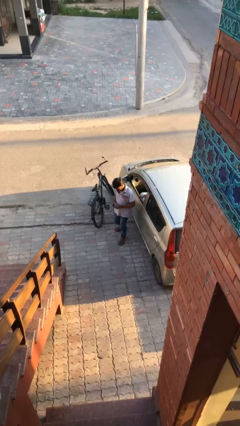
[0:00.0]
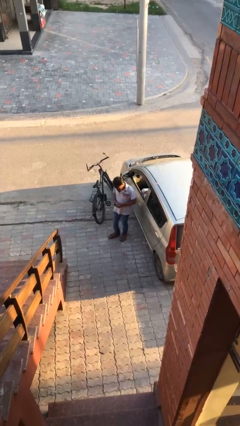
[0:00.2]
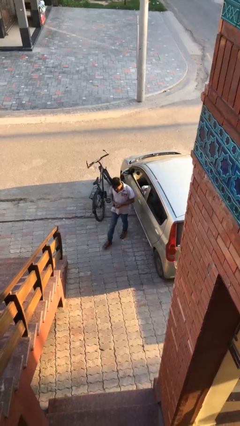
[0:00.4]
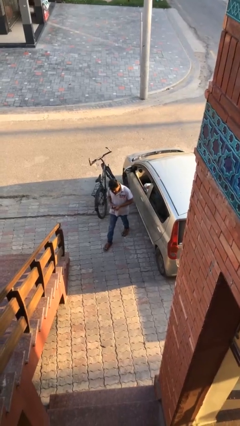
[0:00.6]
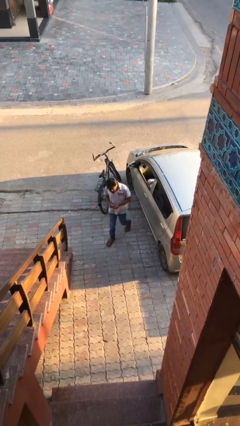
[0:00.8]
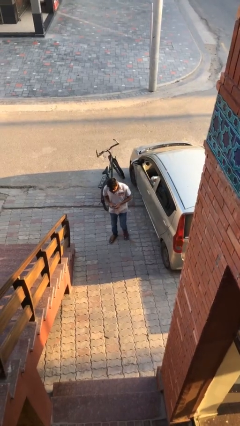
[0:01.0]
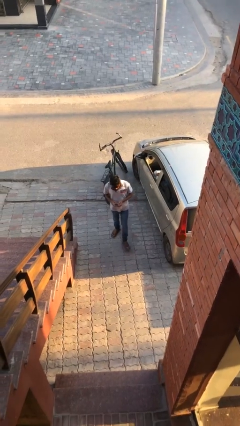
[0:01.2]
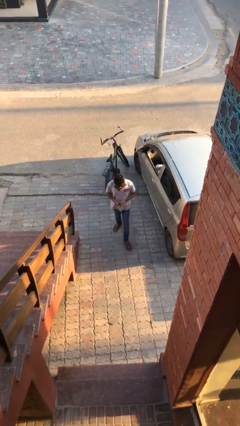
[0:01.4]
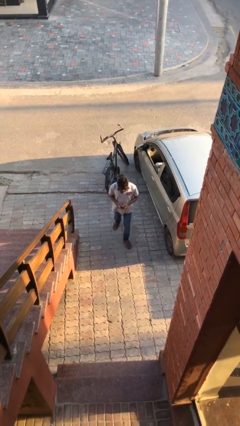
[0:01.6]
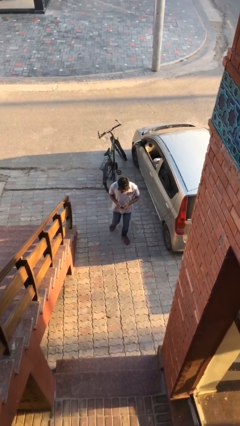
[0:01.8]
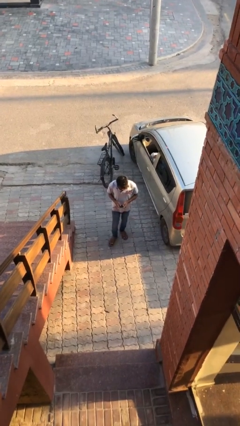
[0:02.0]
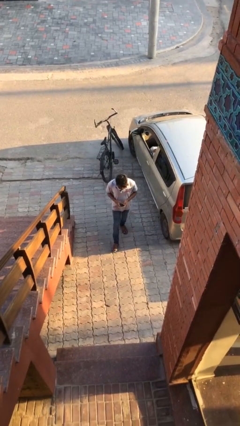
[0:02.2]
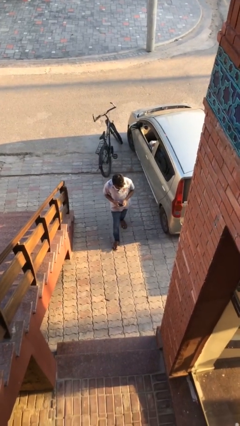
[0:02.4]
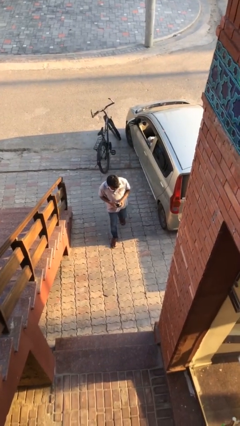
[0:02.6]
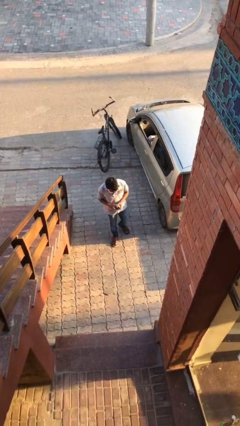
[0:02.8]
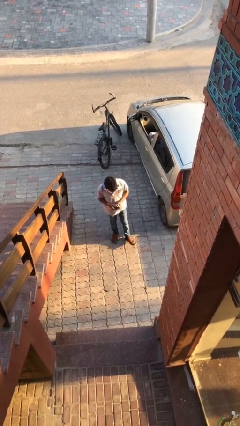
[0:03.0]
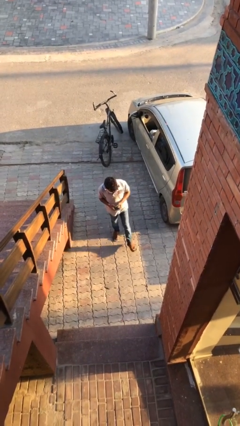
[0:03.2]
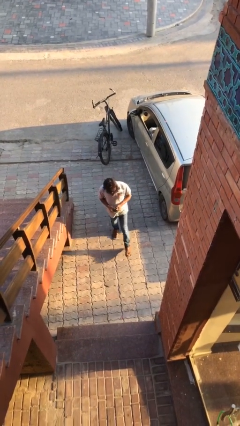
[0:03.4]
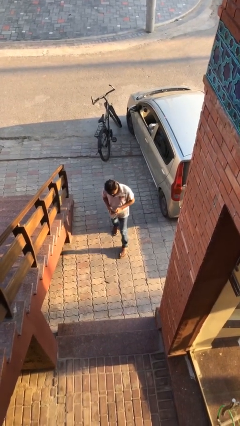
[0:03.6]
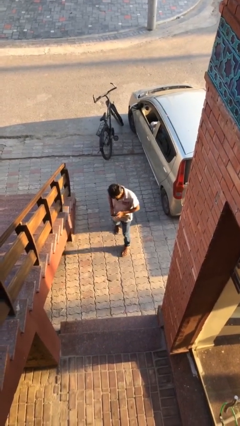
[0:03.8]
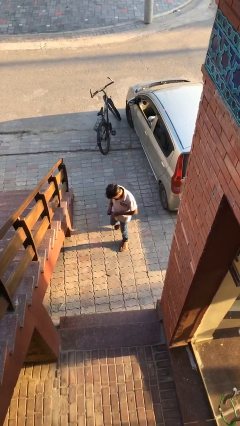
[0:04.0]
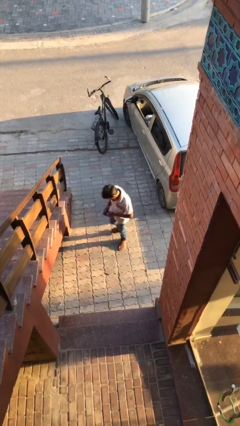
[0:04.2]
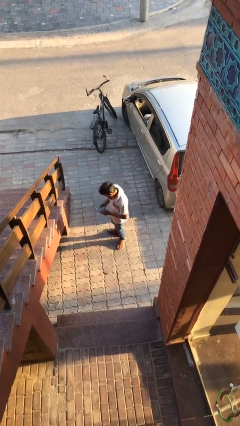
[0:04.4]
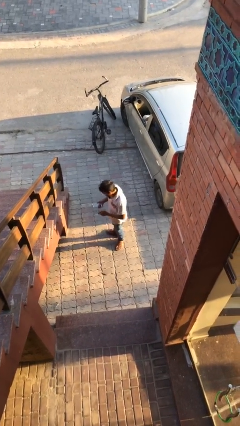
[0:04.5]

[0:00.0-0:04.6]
person texts on phone

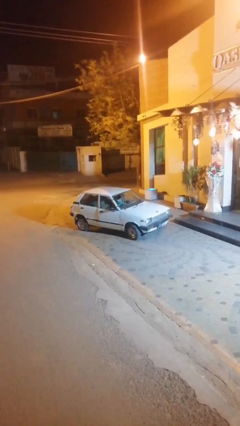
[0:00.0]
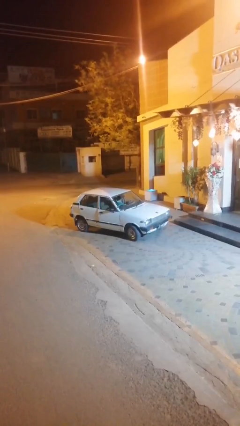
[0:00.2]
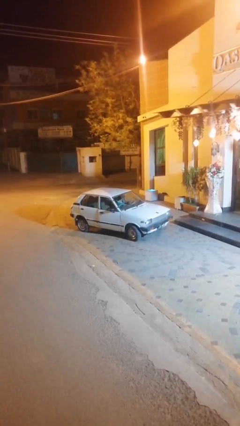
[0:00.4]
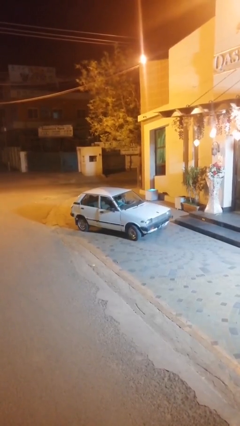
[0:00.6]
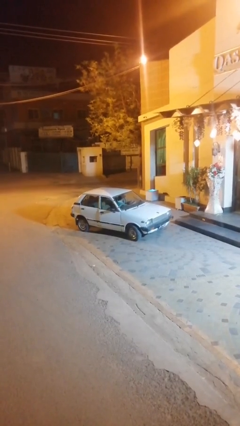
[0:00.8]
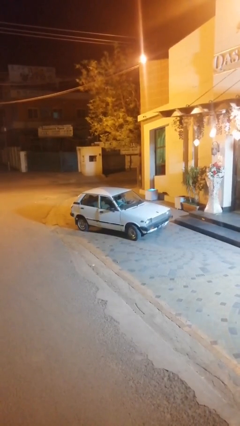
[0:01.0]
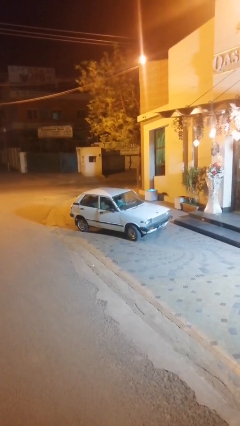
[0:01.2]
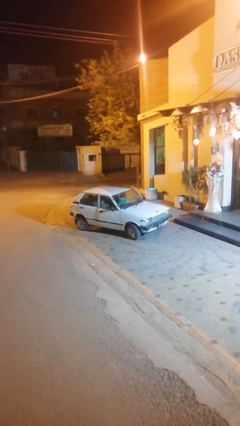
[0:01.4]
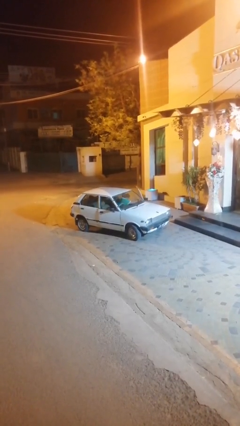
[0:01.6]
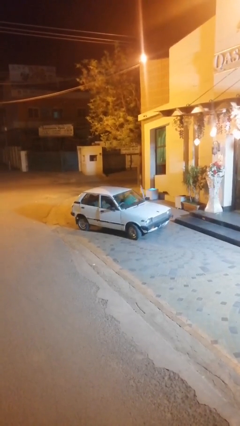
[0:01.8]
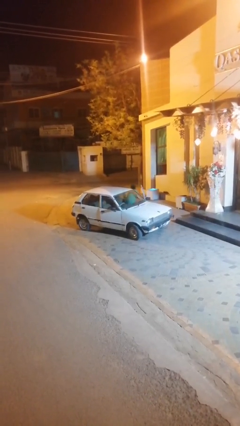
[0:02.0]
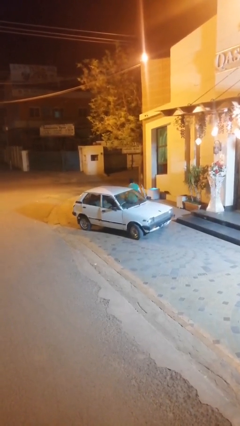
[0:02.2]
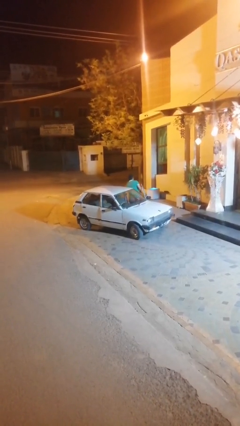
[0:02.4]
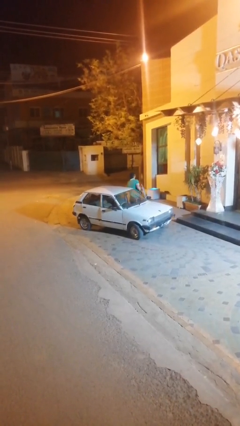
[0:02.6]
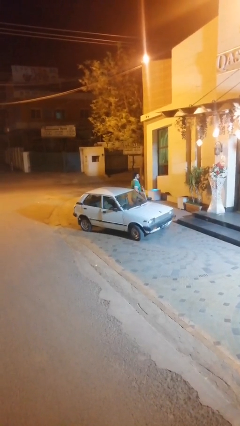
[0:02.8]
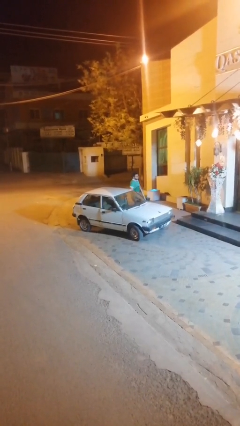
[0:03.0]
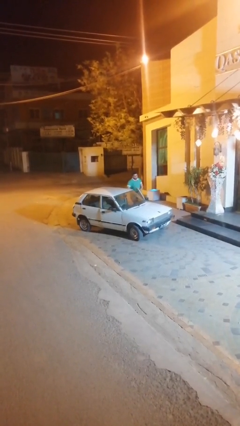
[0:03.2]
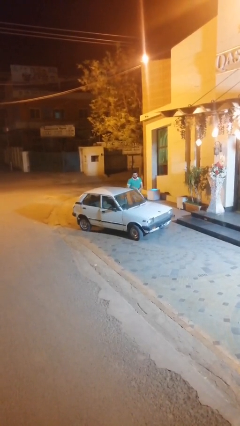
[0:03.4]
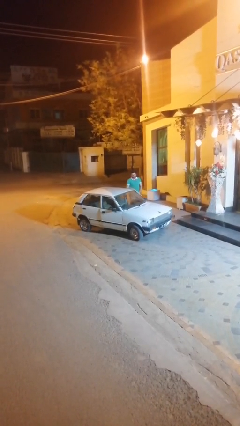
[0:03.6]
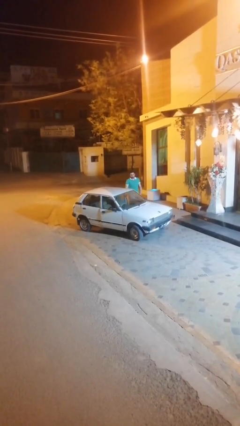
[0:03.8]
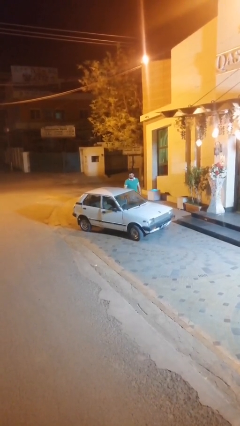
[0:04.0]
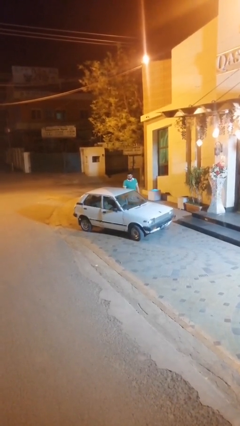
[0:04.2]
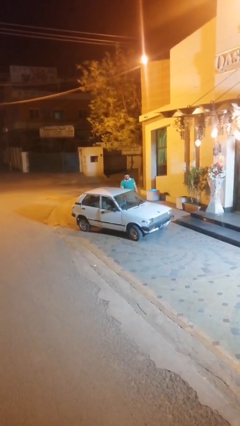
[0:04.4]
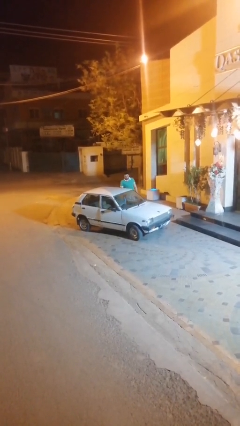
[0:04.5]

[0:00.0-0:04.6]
car drops off person

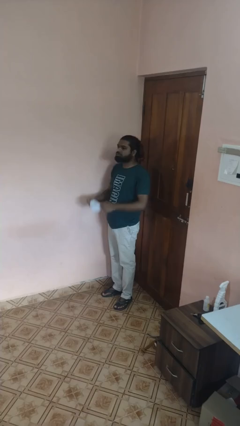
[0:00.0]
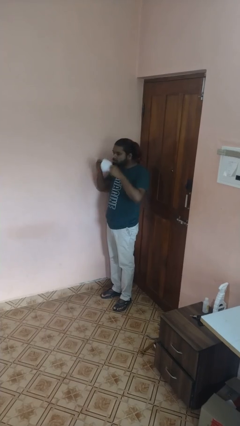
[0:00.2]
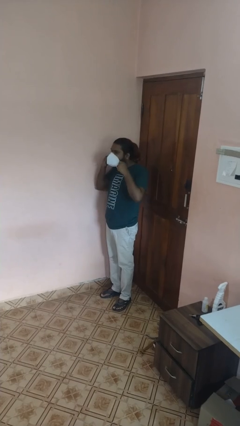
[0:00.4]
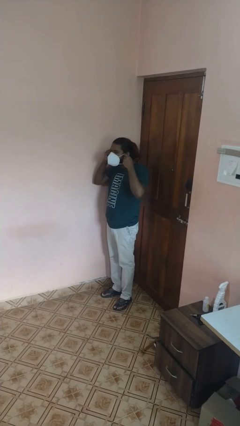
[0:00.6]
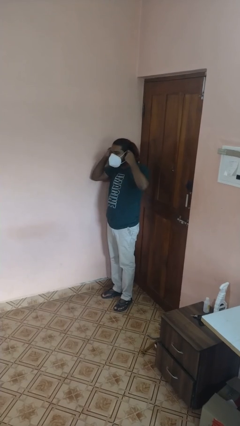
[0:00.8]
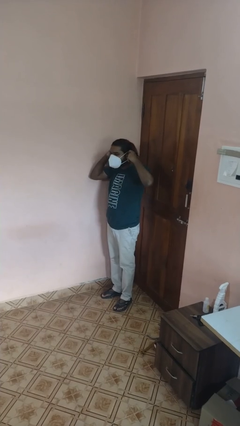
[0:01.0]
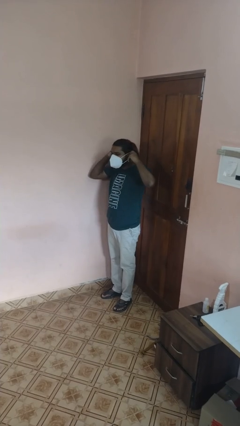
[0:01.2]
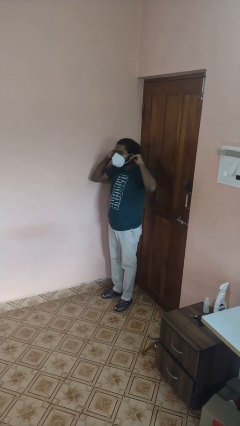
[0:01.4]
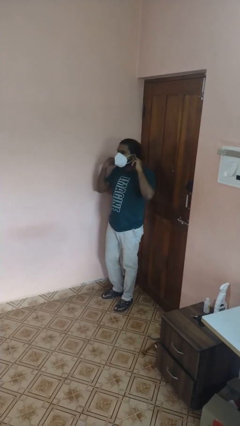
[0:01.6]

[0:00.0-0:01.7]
person puts on facemask

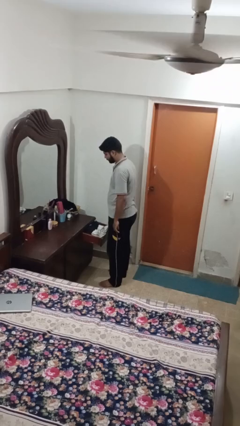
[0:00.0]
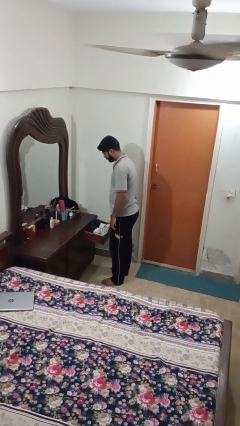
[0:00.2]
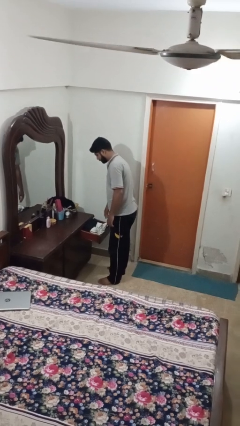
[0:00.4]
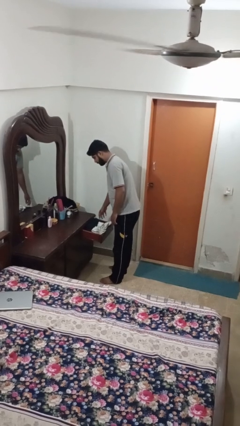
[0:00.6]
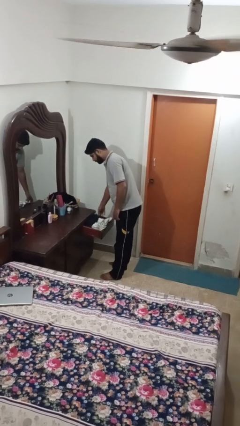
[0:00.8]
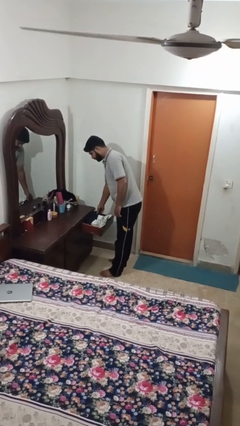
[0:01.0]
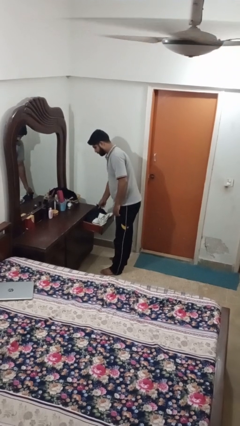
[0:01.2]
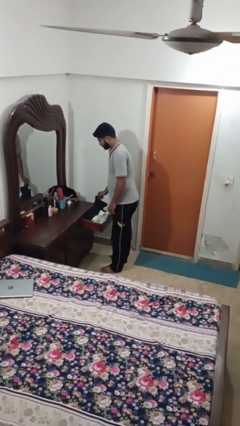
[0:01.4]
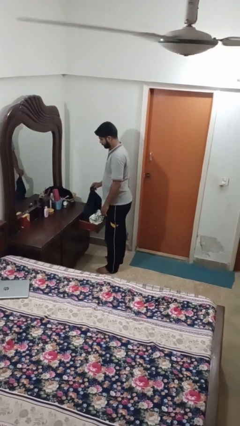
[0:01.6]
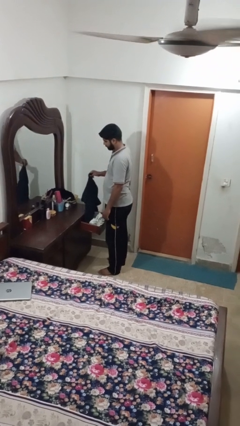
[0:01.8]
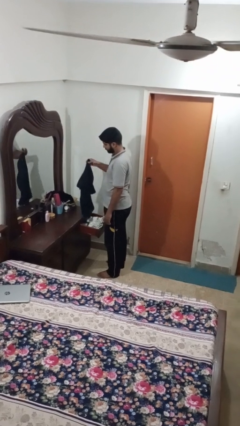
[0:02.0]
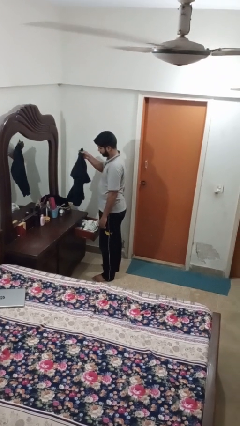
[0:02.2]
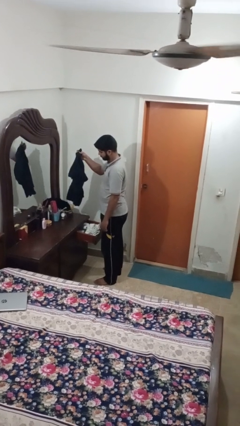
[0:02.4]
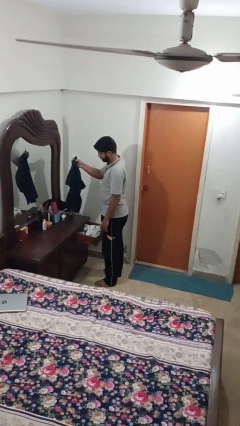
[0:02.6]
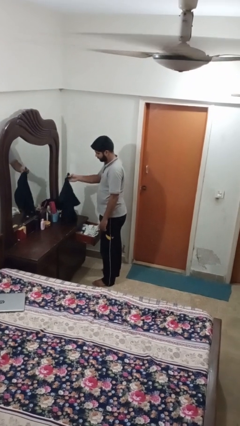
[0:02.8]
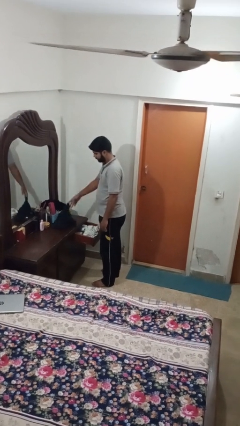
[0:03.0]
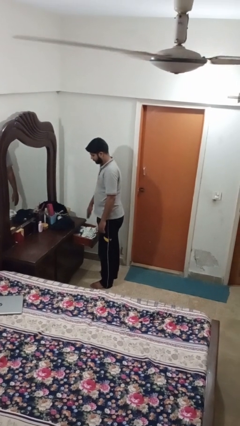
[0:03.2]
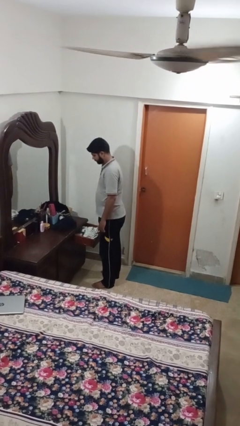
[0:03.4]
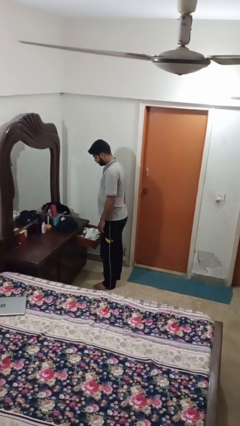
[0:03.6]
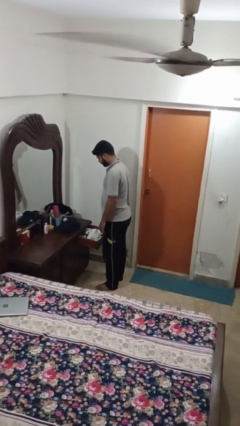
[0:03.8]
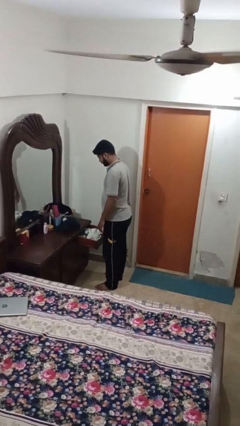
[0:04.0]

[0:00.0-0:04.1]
person takes clothes from dresser

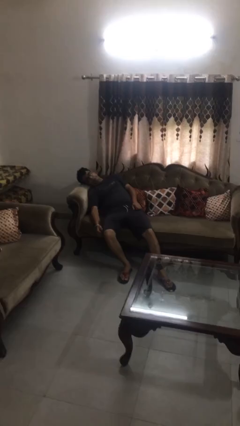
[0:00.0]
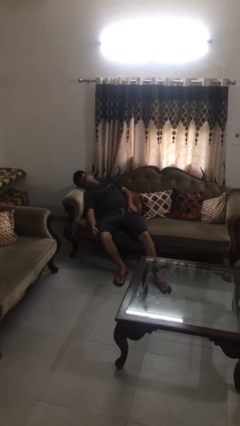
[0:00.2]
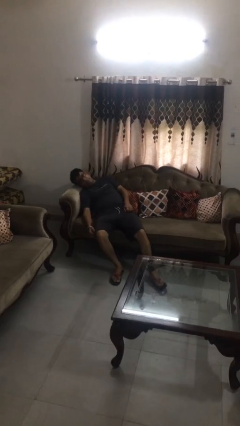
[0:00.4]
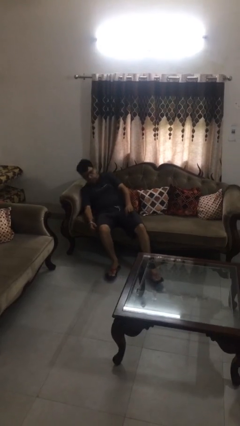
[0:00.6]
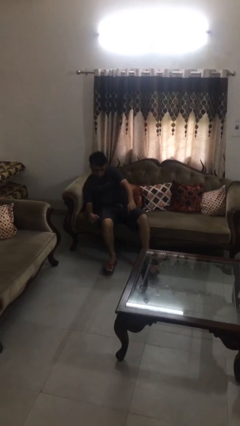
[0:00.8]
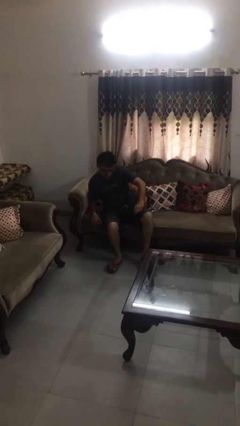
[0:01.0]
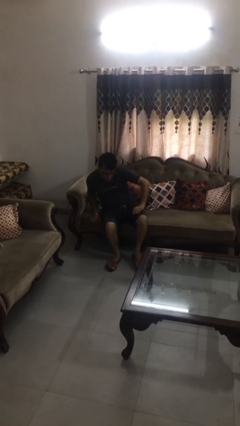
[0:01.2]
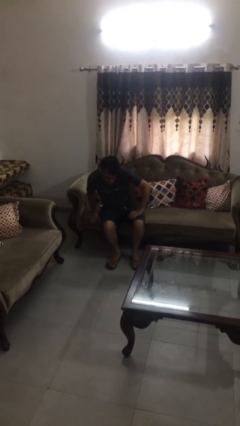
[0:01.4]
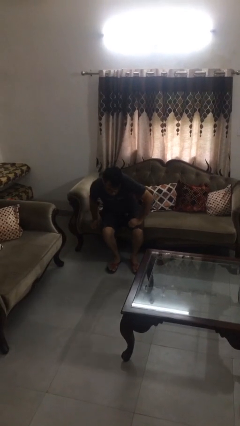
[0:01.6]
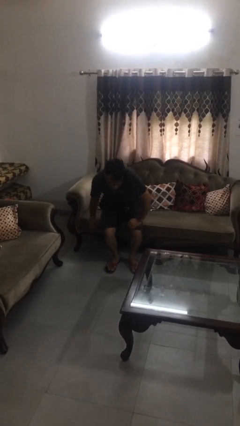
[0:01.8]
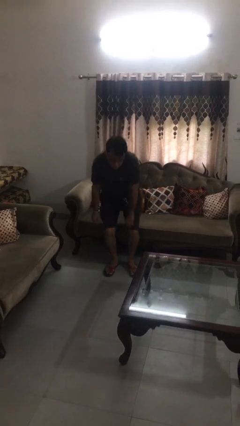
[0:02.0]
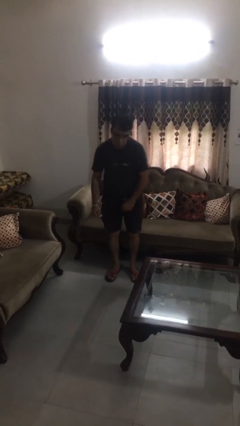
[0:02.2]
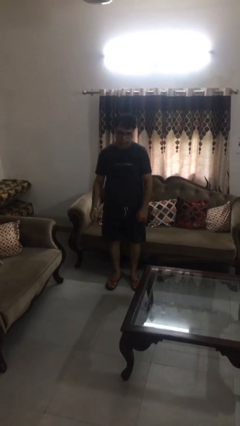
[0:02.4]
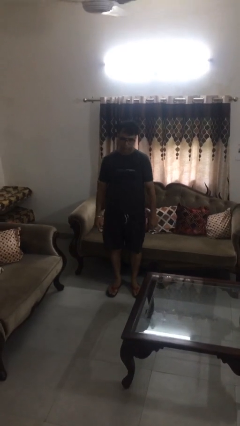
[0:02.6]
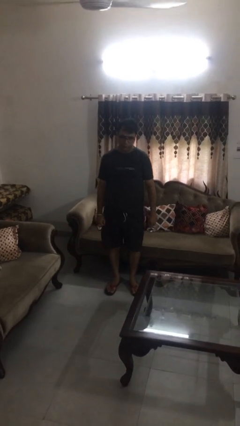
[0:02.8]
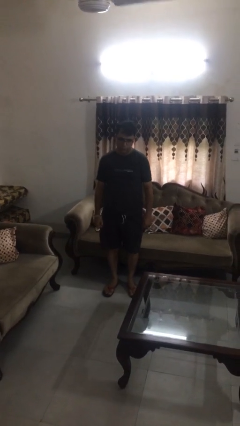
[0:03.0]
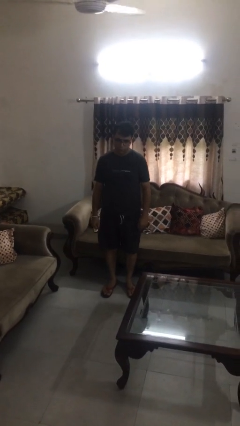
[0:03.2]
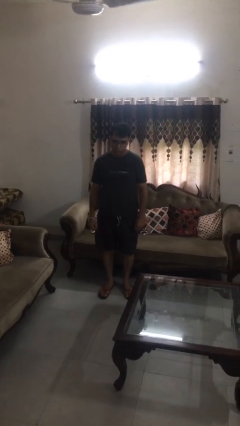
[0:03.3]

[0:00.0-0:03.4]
person stands up
